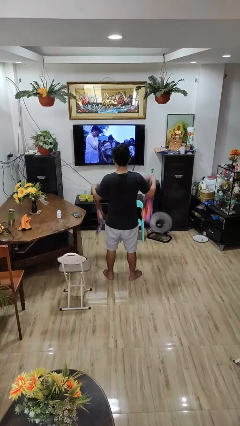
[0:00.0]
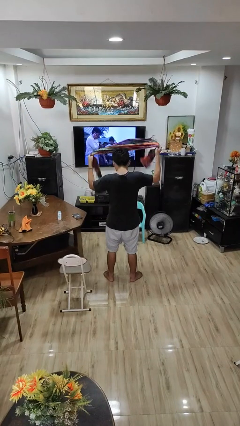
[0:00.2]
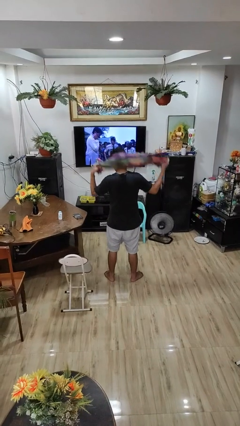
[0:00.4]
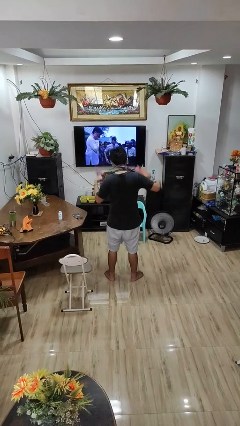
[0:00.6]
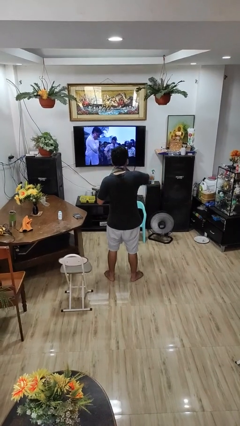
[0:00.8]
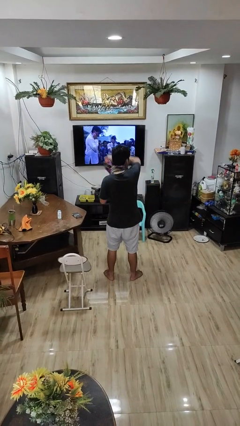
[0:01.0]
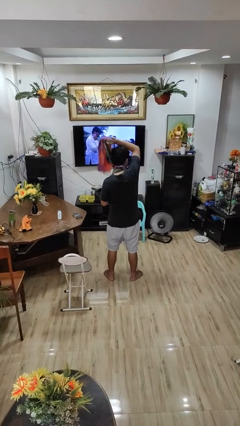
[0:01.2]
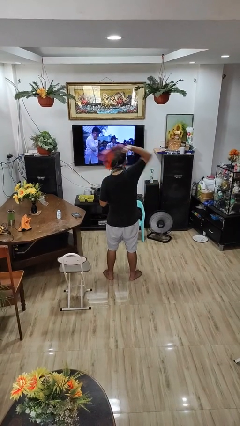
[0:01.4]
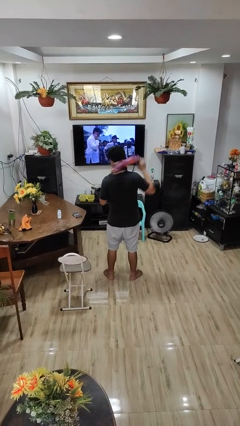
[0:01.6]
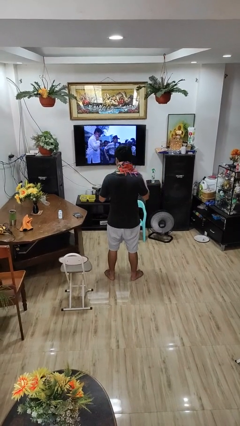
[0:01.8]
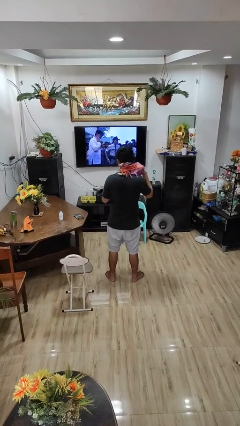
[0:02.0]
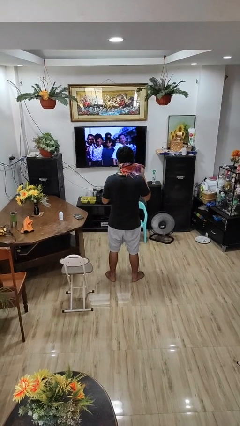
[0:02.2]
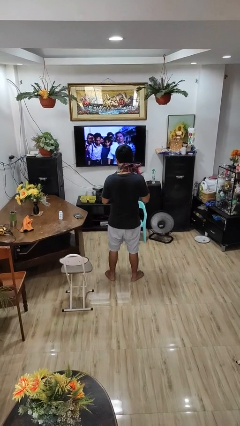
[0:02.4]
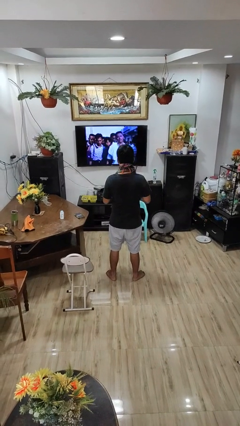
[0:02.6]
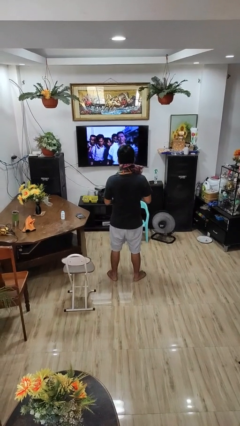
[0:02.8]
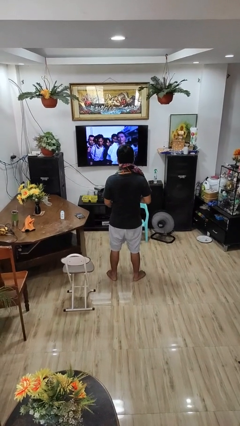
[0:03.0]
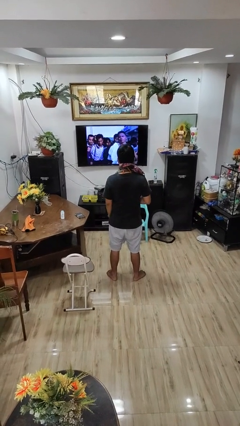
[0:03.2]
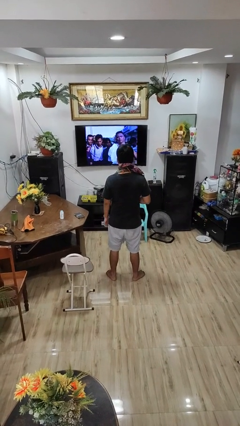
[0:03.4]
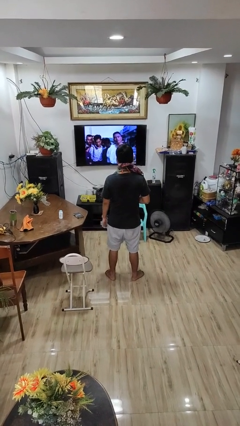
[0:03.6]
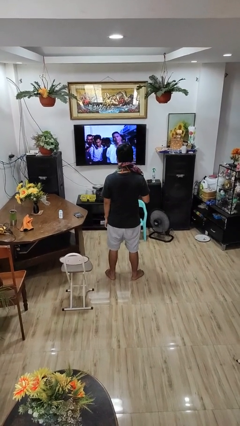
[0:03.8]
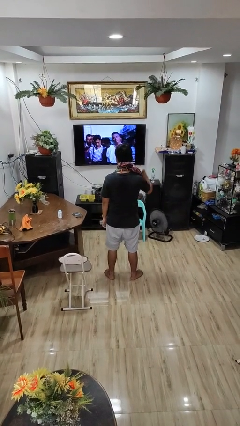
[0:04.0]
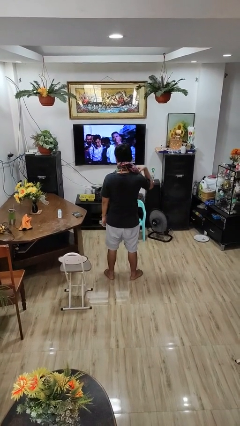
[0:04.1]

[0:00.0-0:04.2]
person puts on scarf

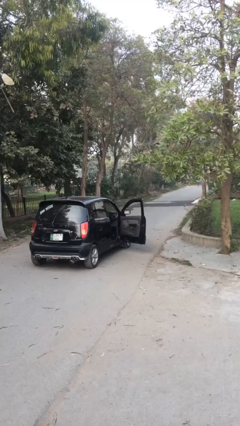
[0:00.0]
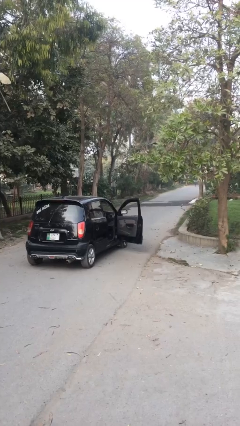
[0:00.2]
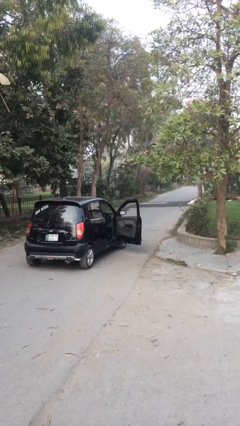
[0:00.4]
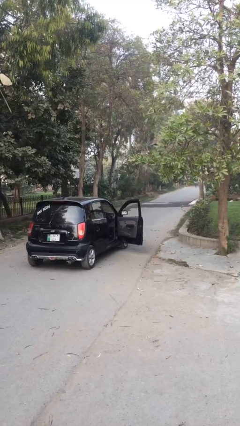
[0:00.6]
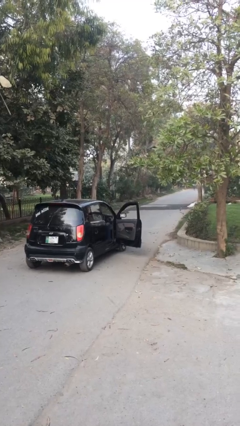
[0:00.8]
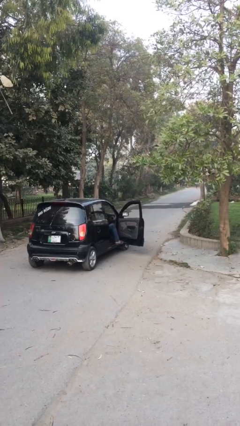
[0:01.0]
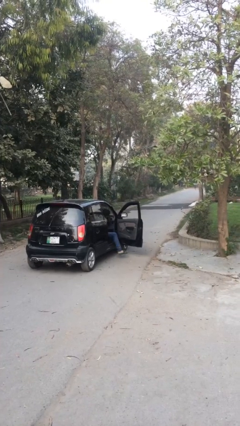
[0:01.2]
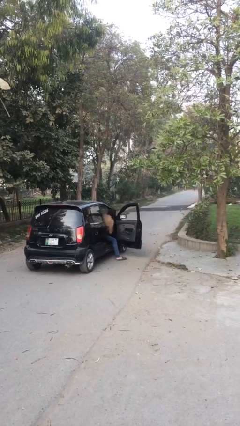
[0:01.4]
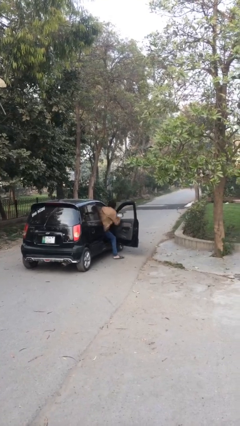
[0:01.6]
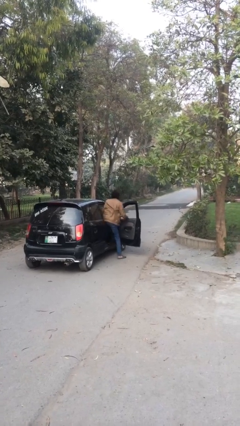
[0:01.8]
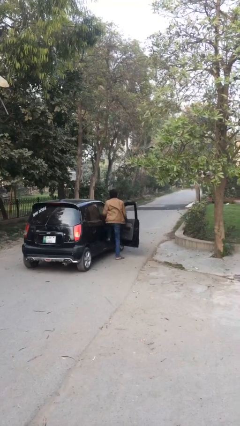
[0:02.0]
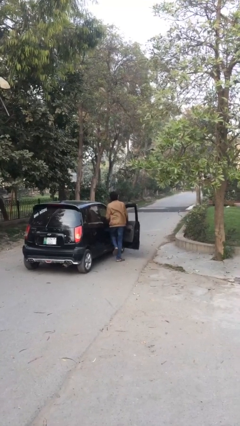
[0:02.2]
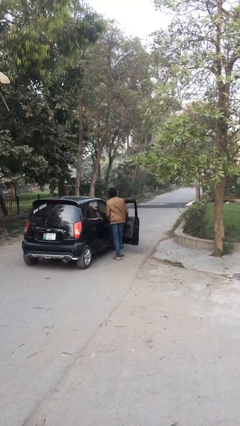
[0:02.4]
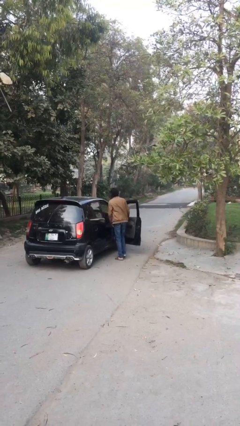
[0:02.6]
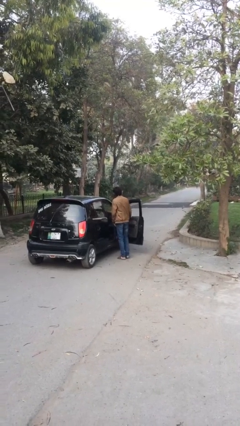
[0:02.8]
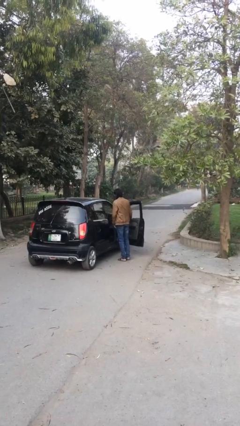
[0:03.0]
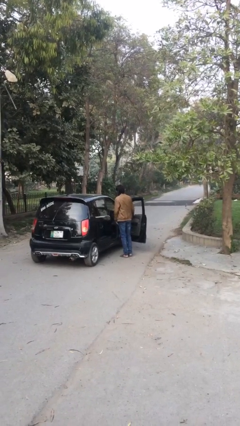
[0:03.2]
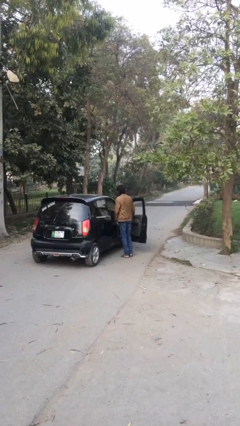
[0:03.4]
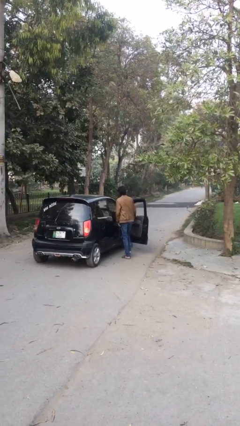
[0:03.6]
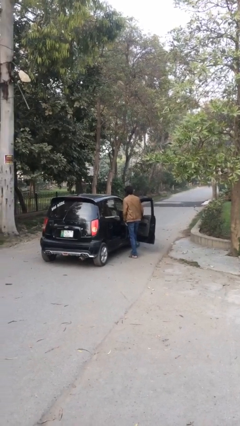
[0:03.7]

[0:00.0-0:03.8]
person exits car

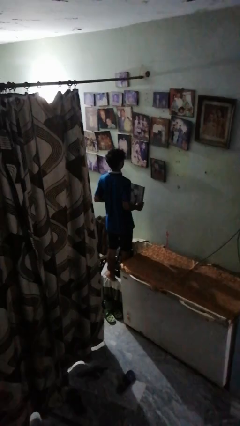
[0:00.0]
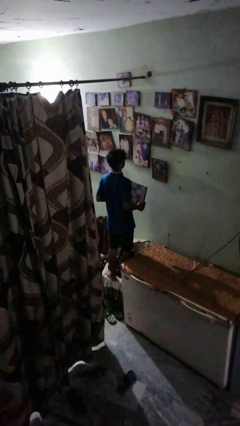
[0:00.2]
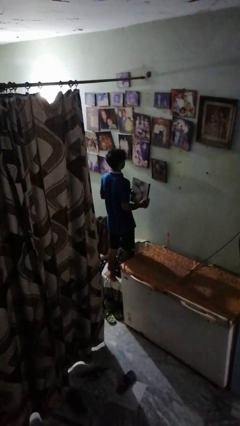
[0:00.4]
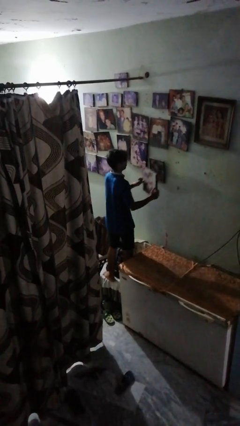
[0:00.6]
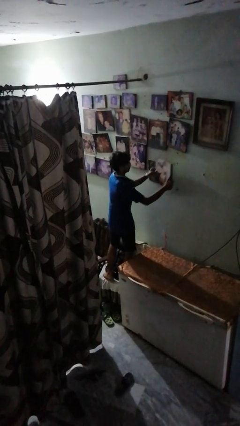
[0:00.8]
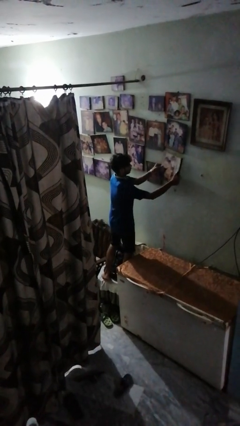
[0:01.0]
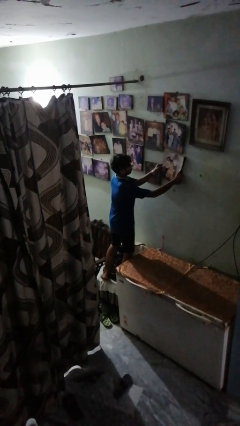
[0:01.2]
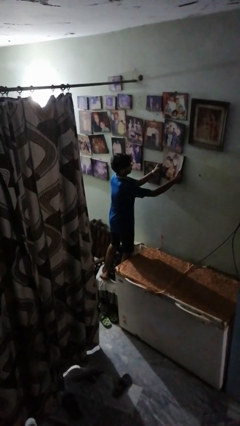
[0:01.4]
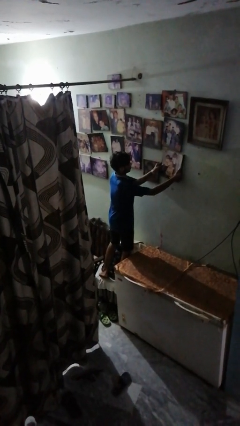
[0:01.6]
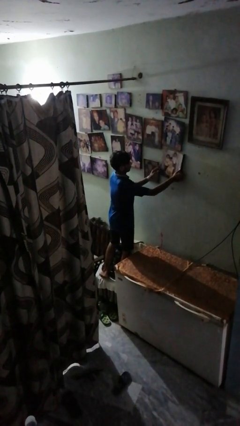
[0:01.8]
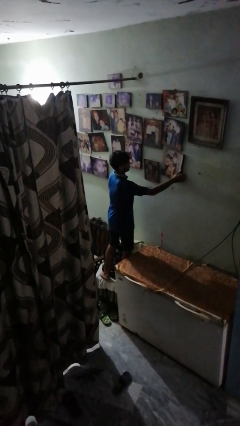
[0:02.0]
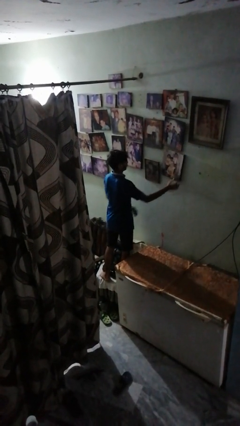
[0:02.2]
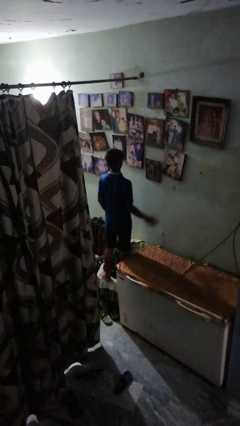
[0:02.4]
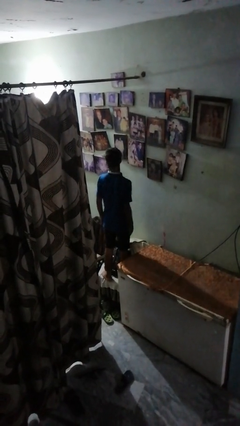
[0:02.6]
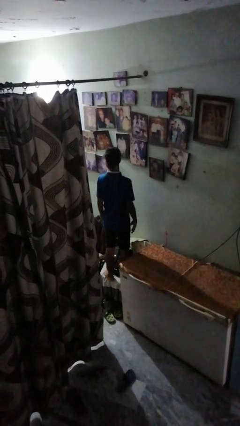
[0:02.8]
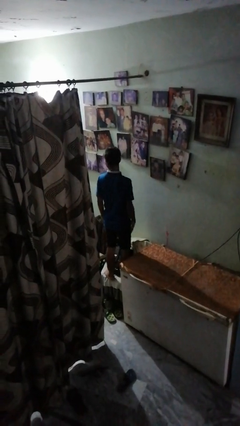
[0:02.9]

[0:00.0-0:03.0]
person puts up picture frame

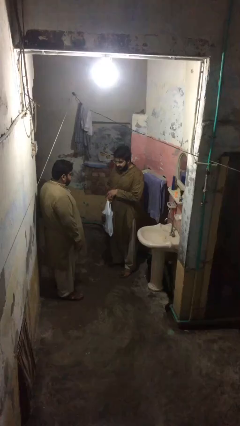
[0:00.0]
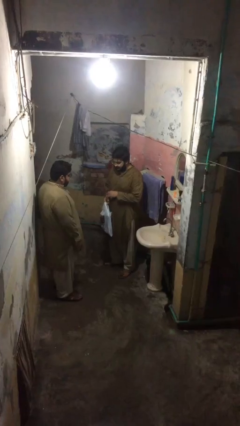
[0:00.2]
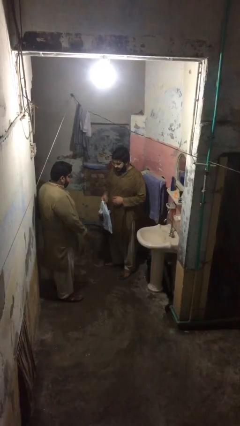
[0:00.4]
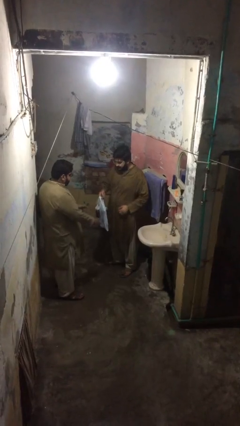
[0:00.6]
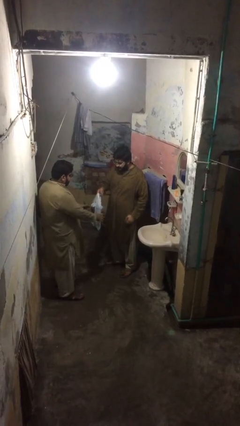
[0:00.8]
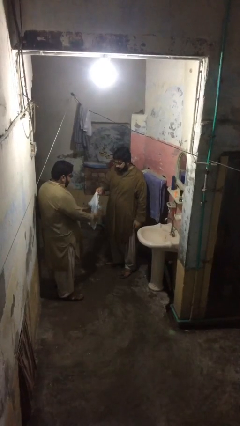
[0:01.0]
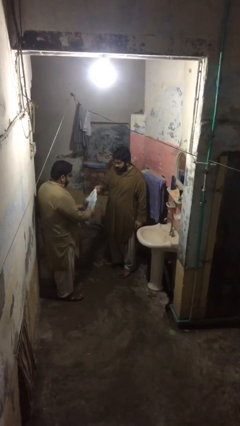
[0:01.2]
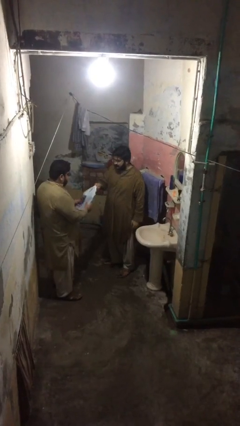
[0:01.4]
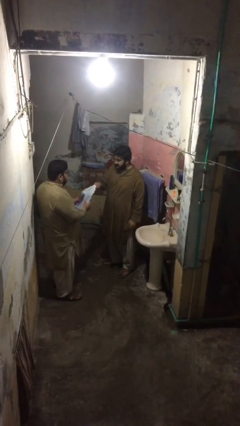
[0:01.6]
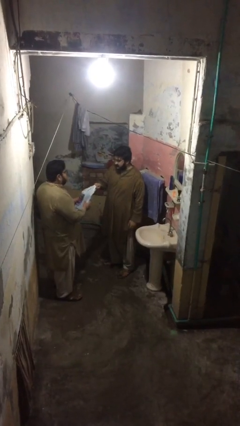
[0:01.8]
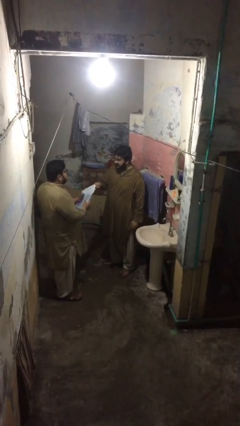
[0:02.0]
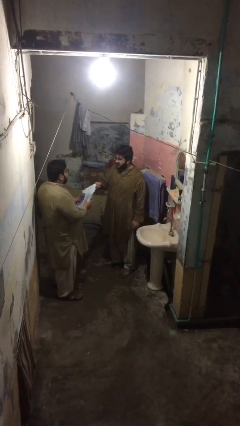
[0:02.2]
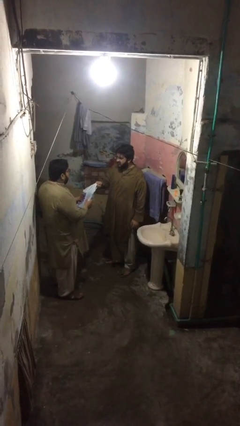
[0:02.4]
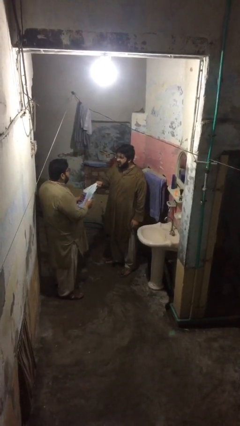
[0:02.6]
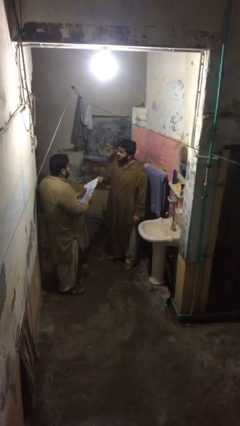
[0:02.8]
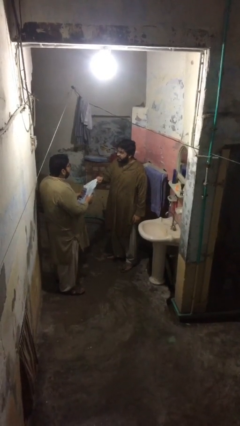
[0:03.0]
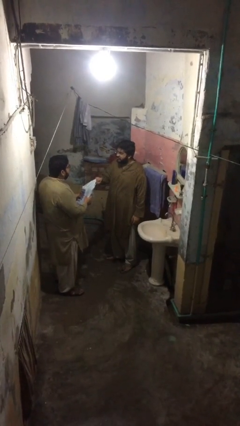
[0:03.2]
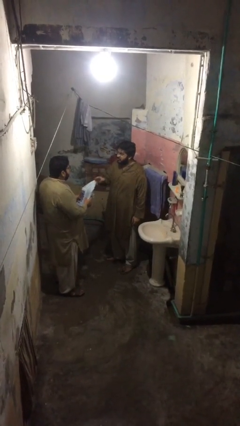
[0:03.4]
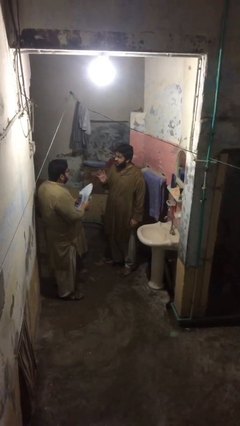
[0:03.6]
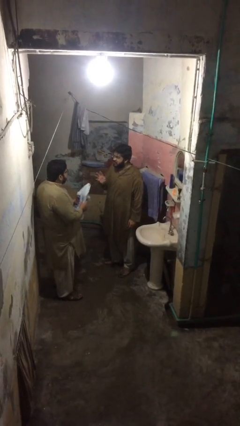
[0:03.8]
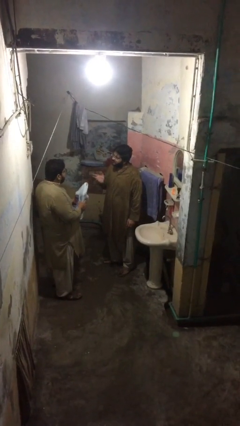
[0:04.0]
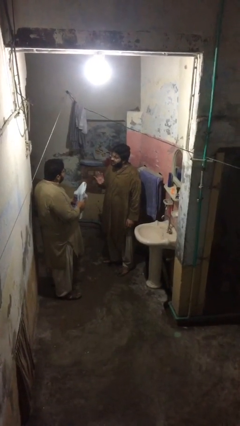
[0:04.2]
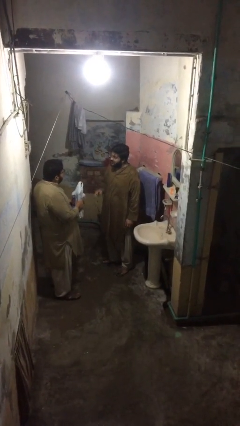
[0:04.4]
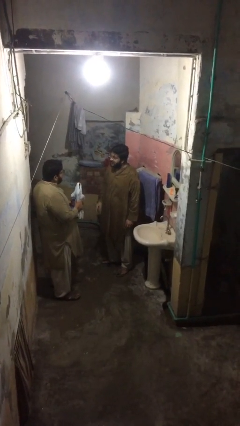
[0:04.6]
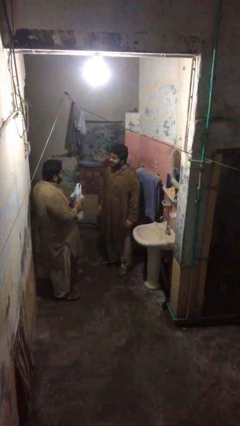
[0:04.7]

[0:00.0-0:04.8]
person transfers object to person

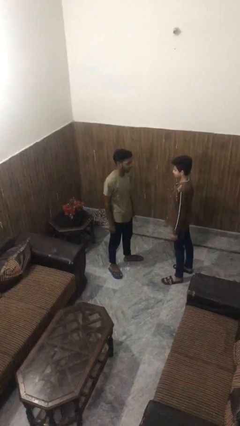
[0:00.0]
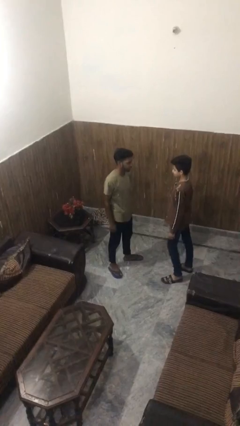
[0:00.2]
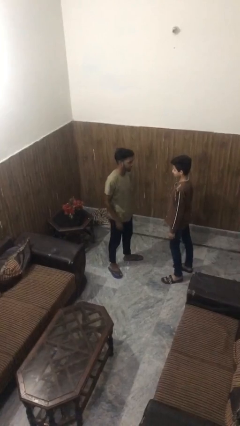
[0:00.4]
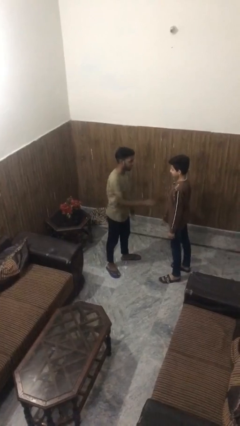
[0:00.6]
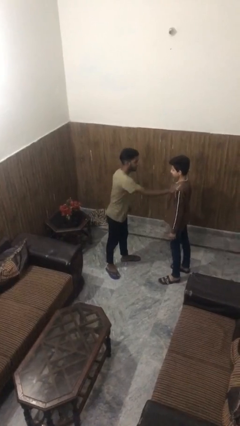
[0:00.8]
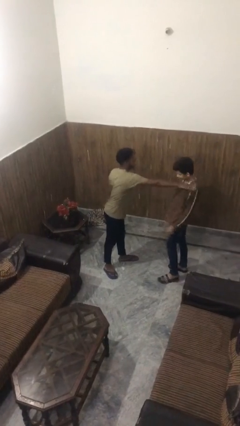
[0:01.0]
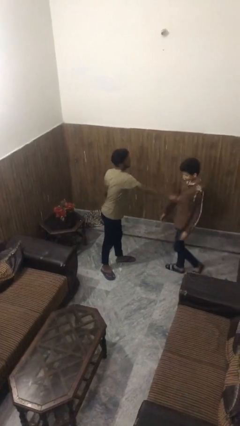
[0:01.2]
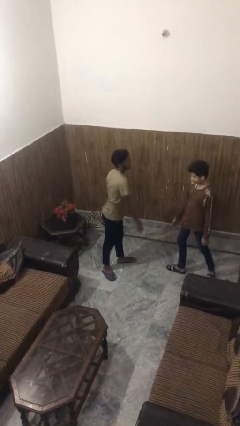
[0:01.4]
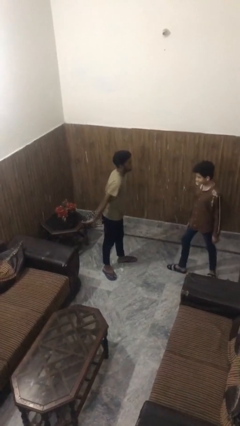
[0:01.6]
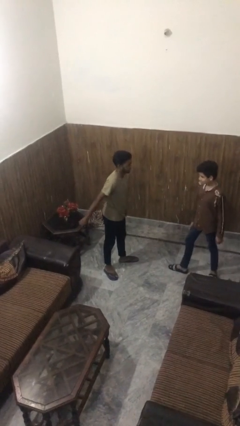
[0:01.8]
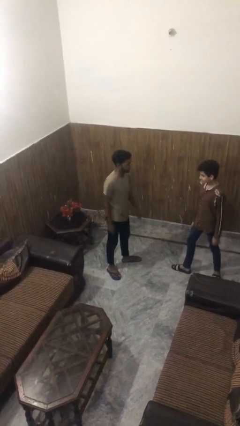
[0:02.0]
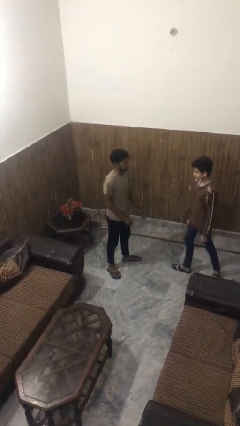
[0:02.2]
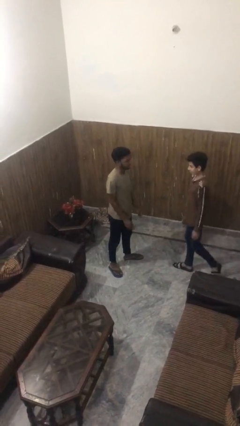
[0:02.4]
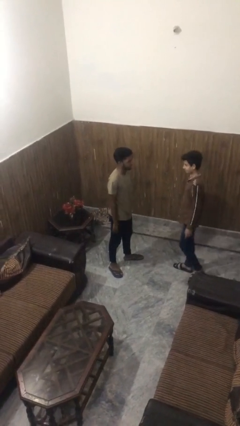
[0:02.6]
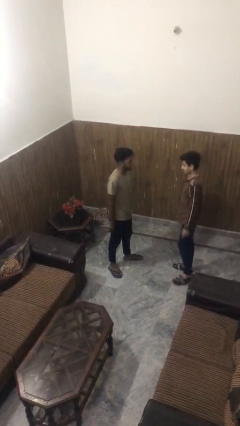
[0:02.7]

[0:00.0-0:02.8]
person shoves person
